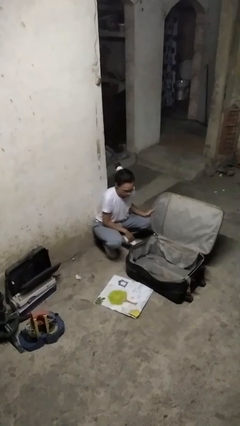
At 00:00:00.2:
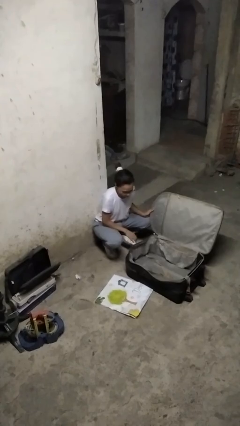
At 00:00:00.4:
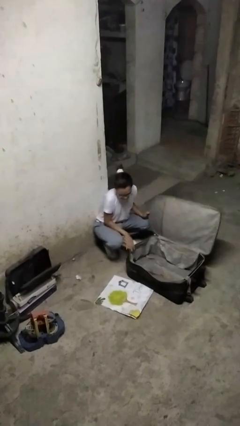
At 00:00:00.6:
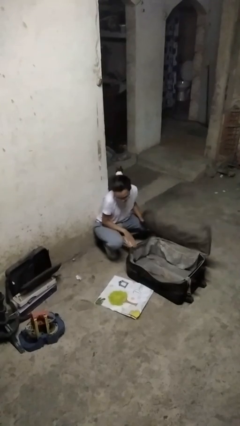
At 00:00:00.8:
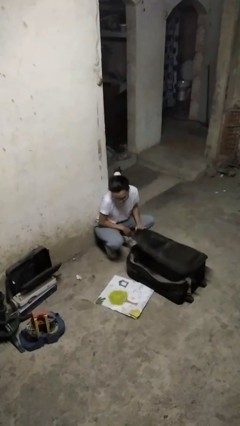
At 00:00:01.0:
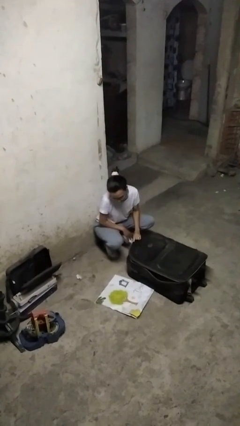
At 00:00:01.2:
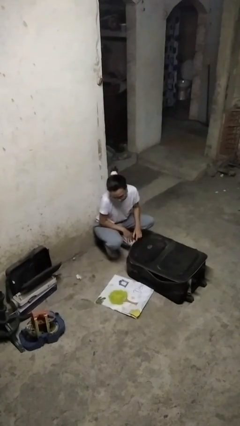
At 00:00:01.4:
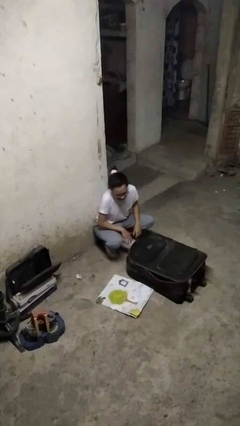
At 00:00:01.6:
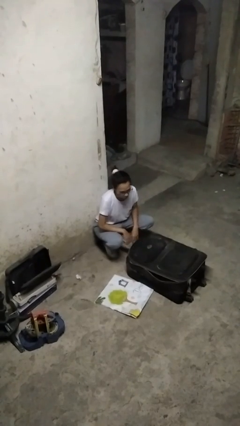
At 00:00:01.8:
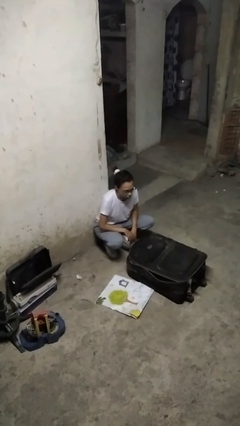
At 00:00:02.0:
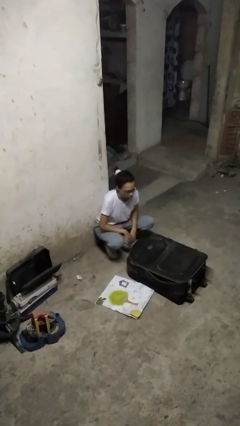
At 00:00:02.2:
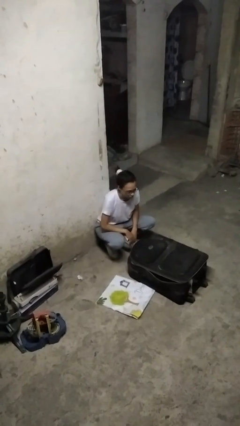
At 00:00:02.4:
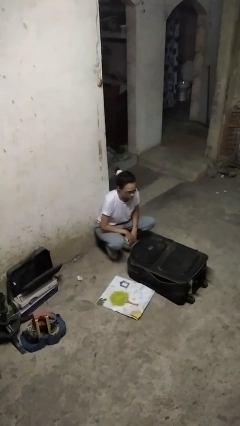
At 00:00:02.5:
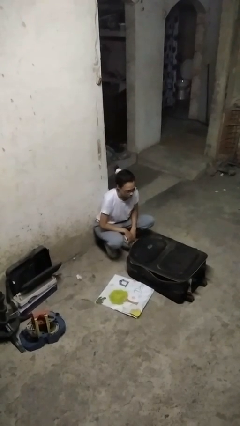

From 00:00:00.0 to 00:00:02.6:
person closes suitcase

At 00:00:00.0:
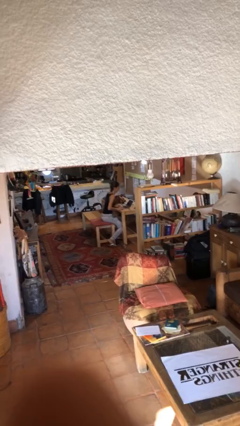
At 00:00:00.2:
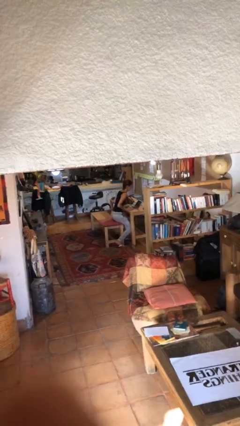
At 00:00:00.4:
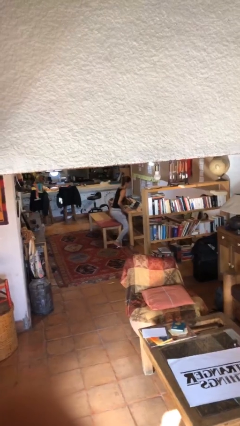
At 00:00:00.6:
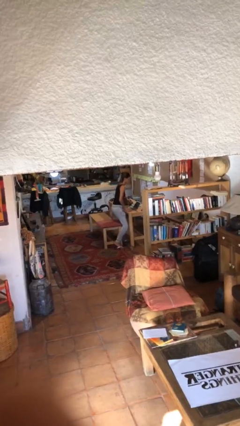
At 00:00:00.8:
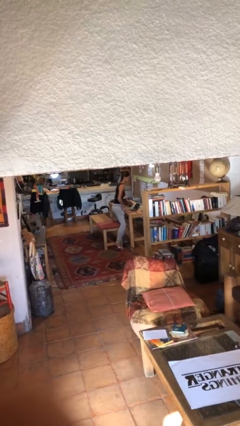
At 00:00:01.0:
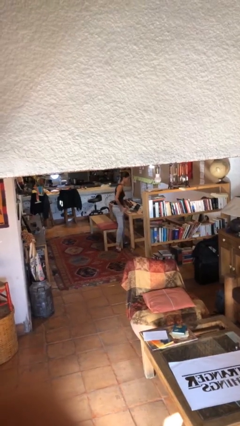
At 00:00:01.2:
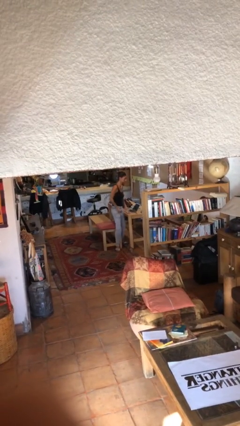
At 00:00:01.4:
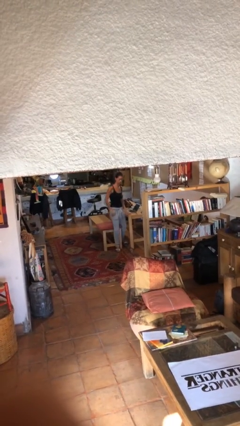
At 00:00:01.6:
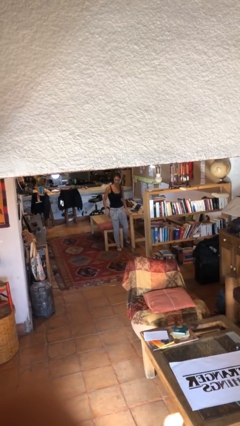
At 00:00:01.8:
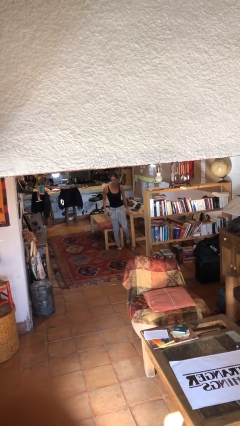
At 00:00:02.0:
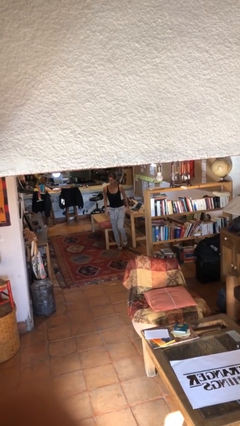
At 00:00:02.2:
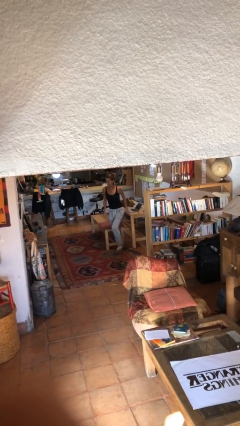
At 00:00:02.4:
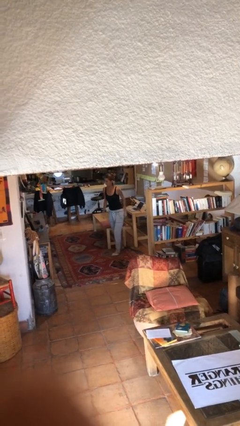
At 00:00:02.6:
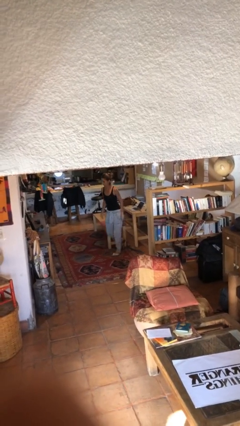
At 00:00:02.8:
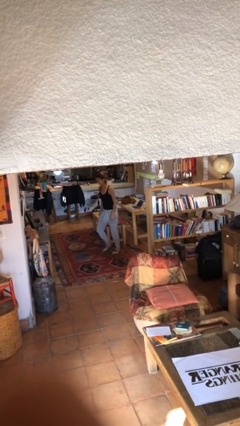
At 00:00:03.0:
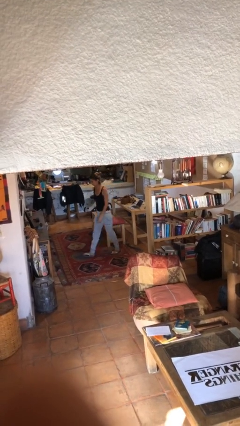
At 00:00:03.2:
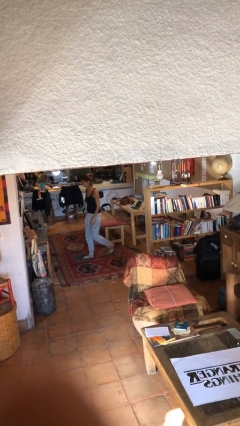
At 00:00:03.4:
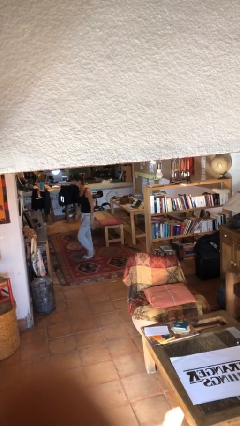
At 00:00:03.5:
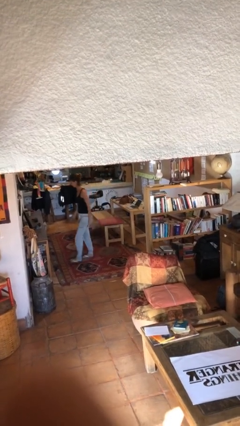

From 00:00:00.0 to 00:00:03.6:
person stands up

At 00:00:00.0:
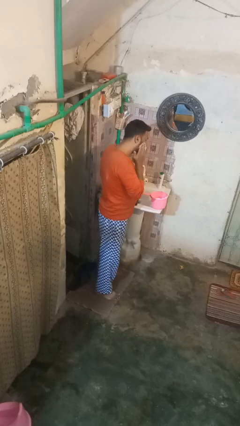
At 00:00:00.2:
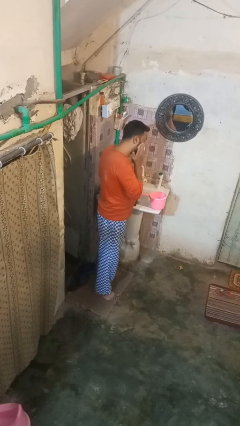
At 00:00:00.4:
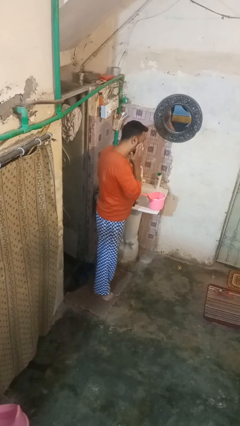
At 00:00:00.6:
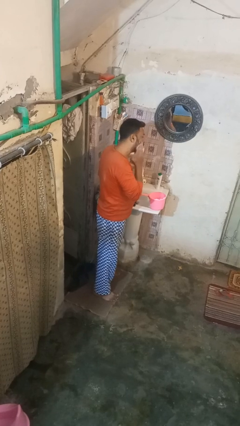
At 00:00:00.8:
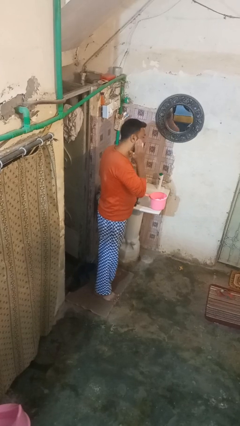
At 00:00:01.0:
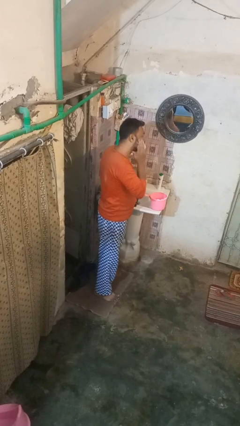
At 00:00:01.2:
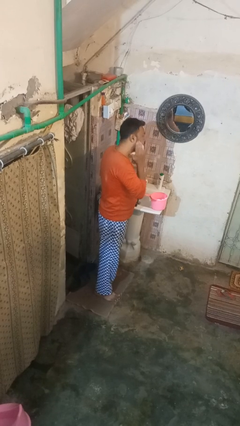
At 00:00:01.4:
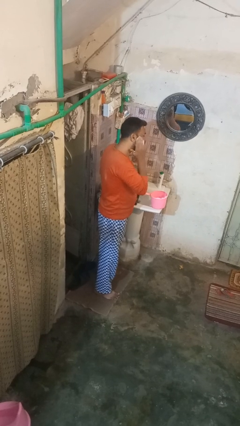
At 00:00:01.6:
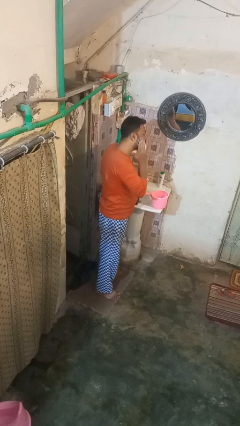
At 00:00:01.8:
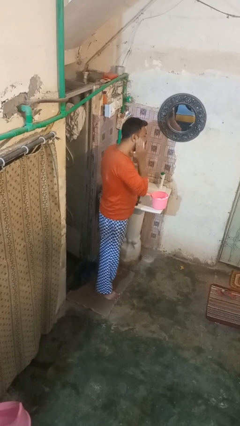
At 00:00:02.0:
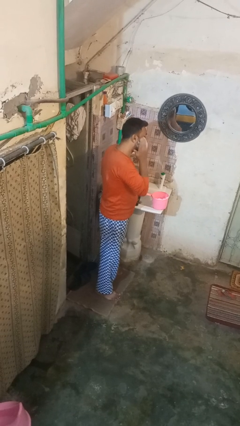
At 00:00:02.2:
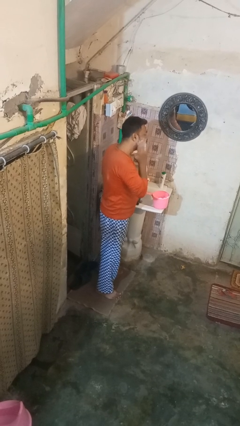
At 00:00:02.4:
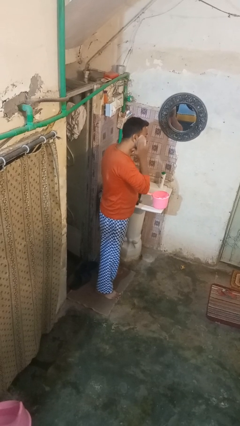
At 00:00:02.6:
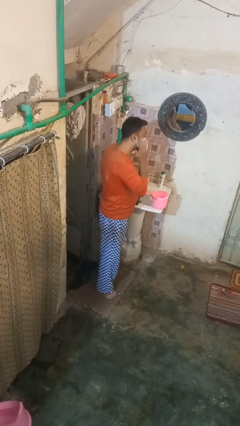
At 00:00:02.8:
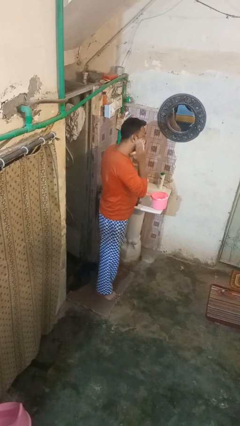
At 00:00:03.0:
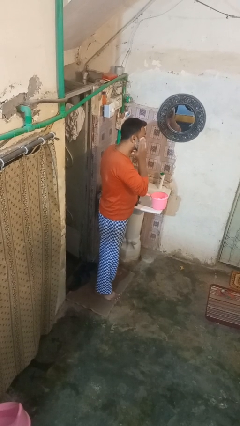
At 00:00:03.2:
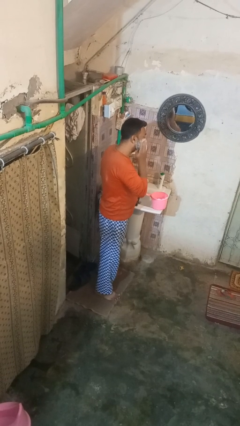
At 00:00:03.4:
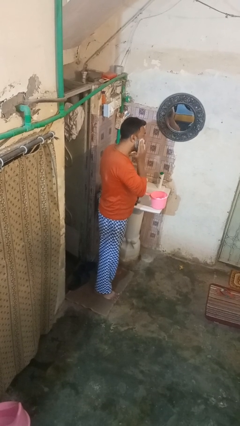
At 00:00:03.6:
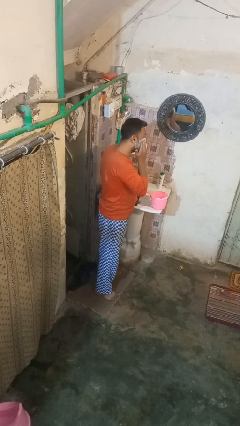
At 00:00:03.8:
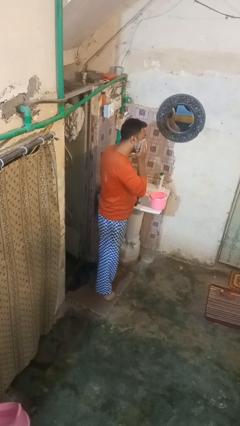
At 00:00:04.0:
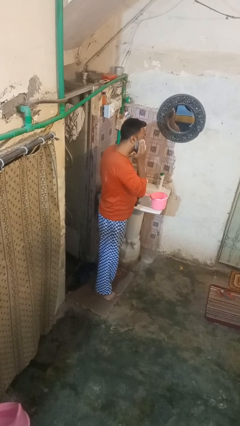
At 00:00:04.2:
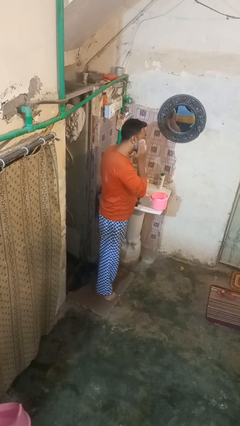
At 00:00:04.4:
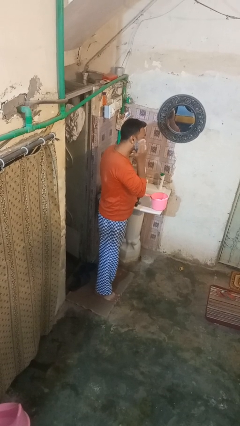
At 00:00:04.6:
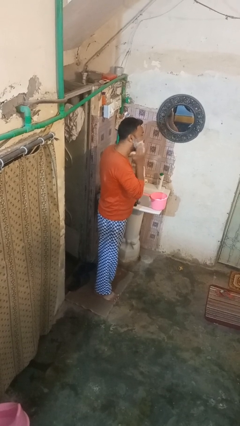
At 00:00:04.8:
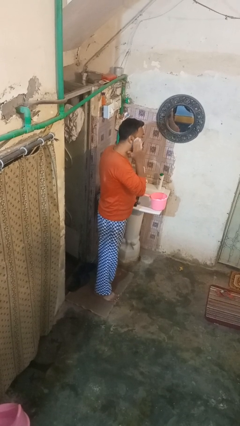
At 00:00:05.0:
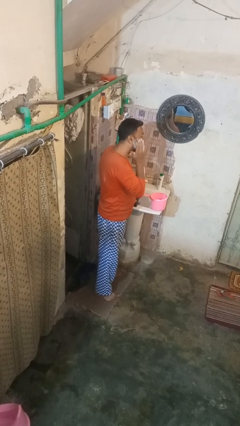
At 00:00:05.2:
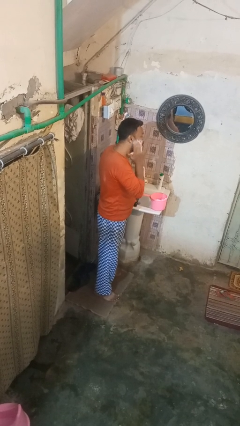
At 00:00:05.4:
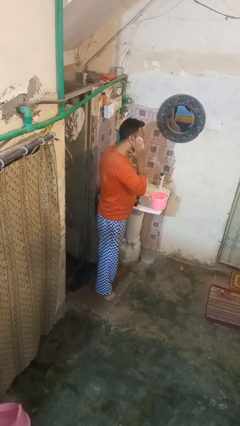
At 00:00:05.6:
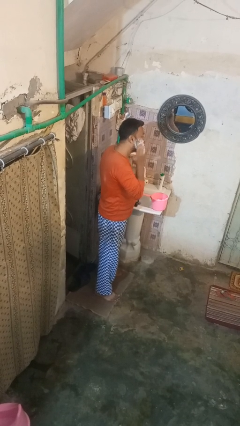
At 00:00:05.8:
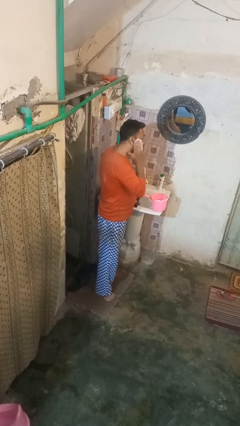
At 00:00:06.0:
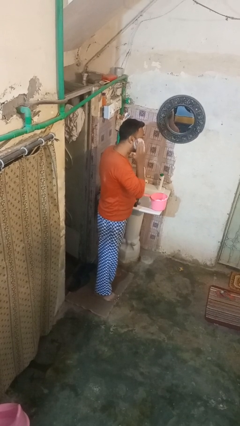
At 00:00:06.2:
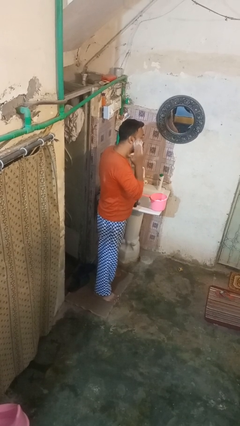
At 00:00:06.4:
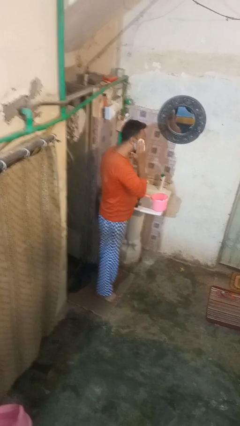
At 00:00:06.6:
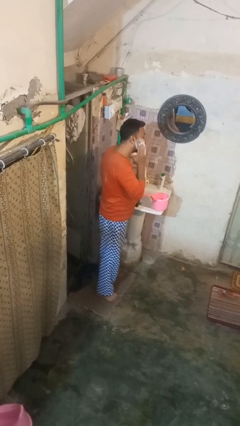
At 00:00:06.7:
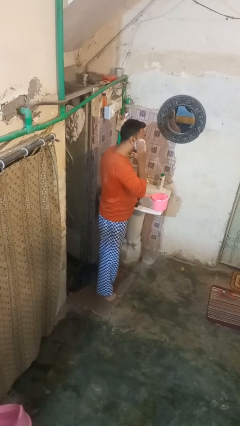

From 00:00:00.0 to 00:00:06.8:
person shaves face

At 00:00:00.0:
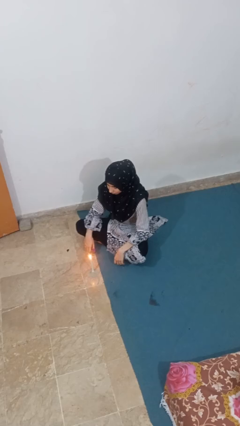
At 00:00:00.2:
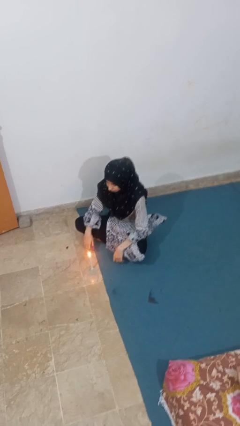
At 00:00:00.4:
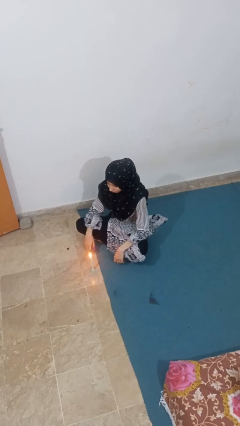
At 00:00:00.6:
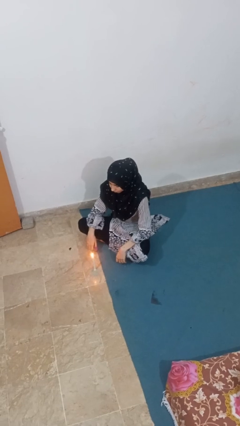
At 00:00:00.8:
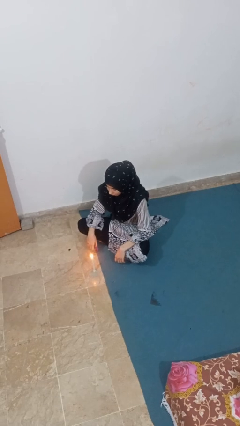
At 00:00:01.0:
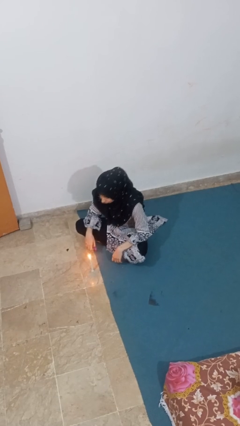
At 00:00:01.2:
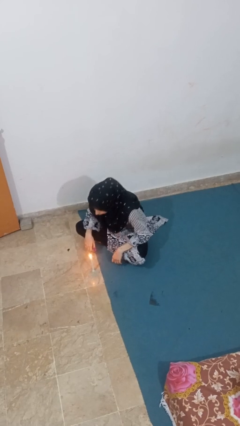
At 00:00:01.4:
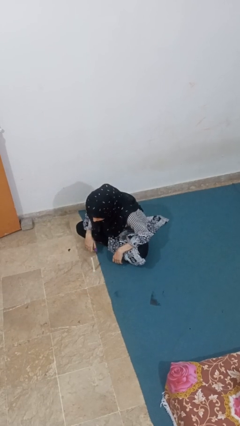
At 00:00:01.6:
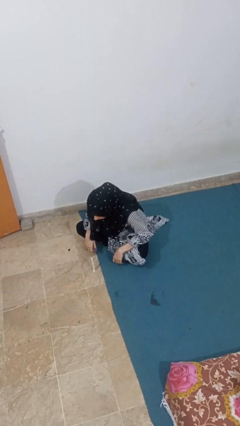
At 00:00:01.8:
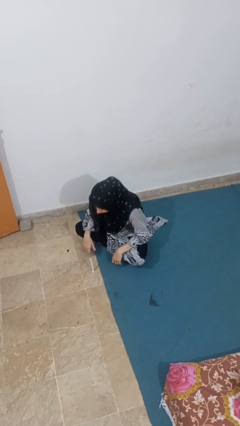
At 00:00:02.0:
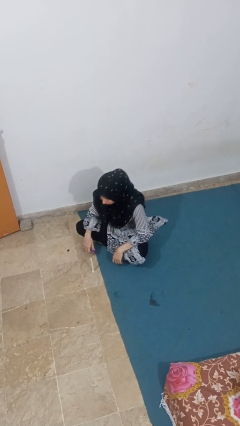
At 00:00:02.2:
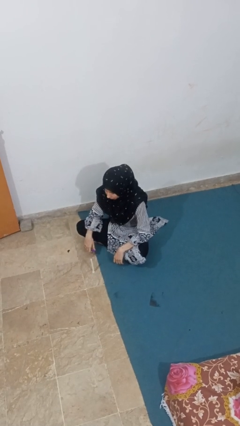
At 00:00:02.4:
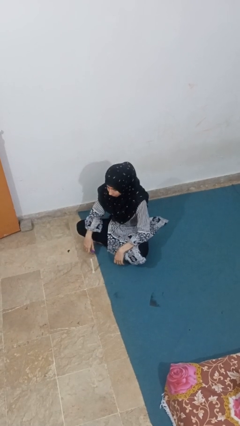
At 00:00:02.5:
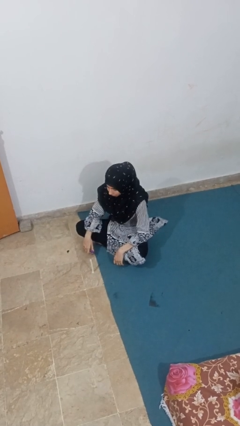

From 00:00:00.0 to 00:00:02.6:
person extinguishes candle

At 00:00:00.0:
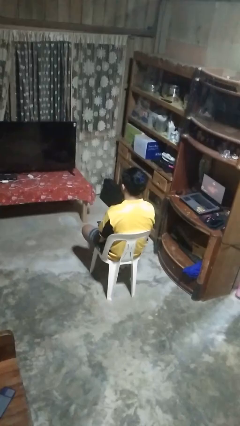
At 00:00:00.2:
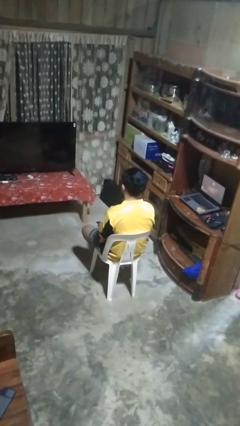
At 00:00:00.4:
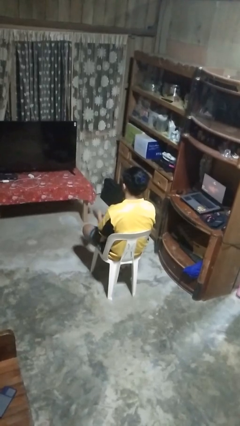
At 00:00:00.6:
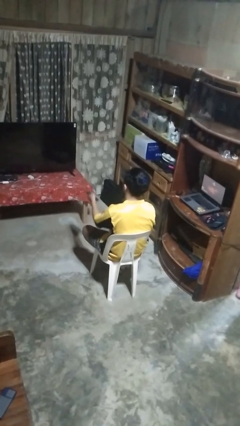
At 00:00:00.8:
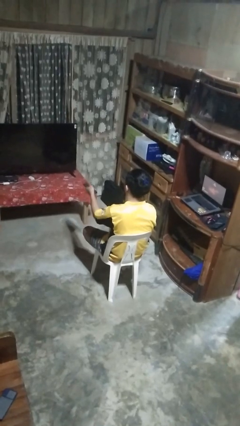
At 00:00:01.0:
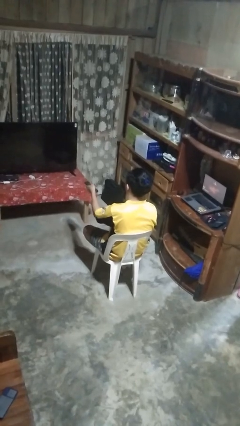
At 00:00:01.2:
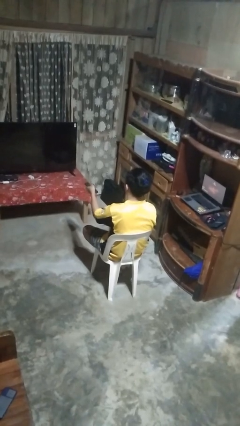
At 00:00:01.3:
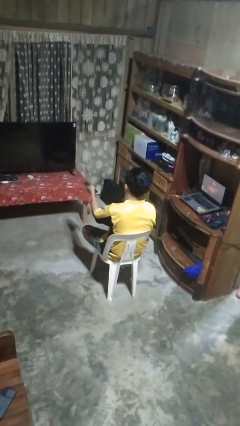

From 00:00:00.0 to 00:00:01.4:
person uses television remote

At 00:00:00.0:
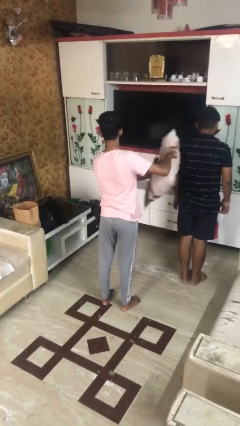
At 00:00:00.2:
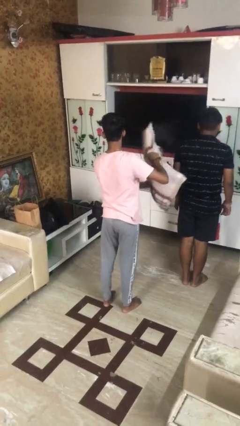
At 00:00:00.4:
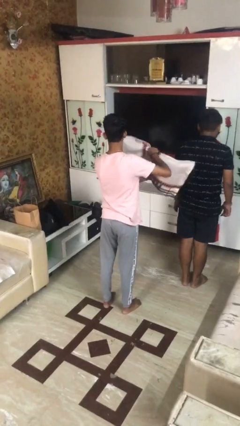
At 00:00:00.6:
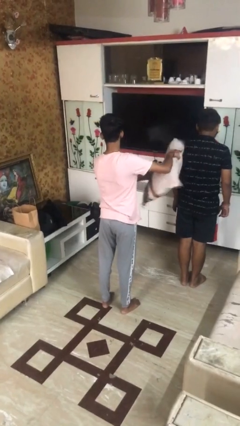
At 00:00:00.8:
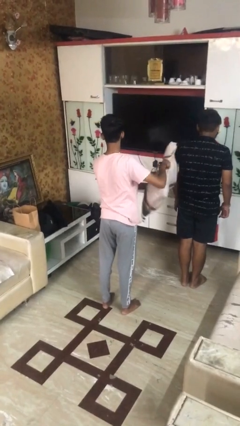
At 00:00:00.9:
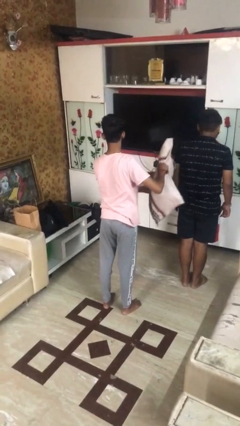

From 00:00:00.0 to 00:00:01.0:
person hits person with pillow
